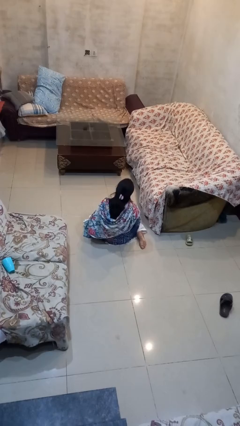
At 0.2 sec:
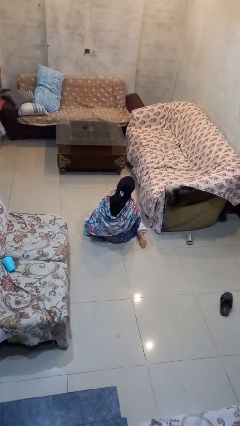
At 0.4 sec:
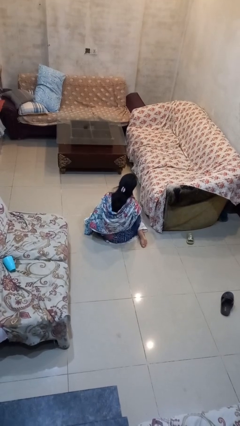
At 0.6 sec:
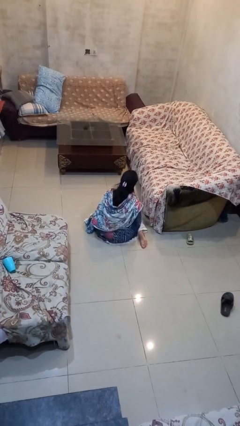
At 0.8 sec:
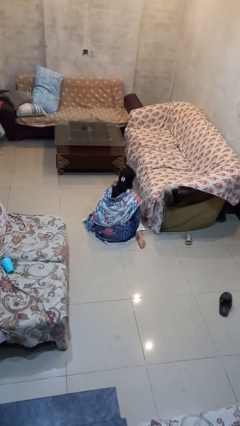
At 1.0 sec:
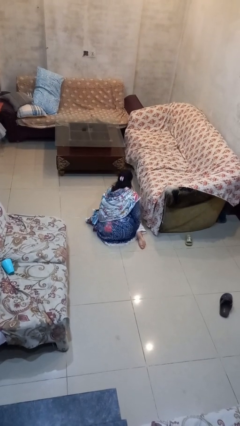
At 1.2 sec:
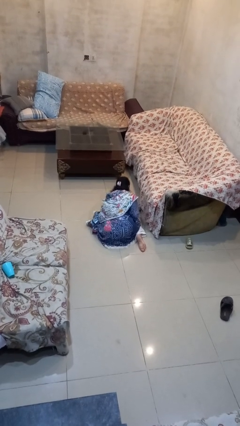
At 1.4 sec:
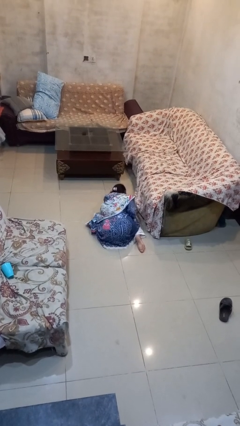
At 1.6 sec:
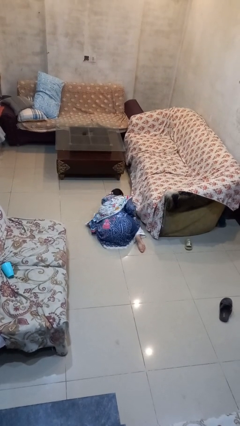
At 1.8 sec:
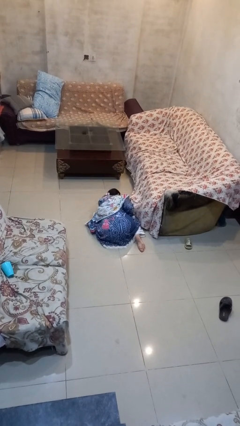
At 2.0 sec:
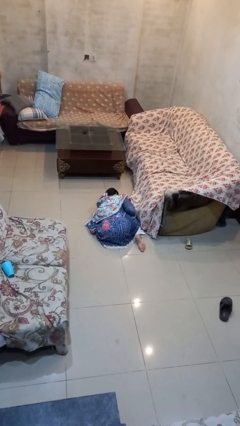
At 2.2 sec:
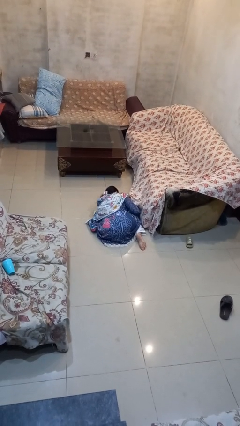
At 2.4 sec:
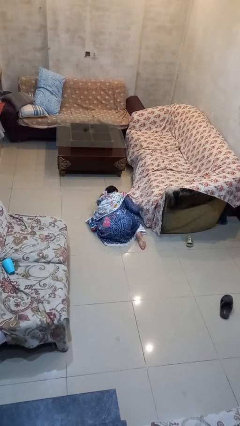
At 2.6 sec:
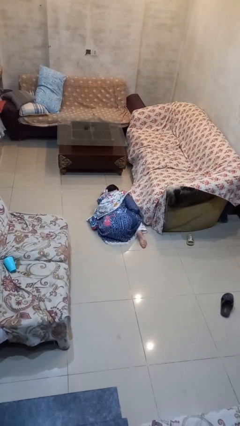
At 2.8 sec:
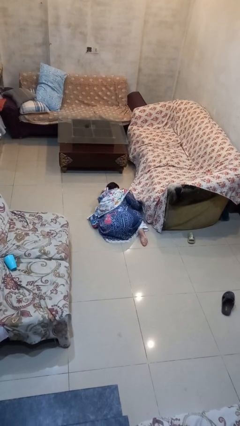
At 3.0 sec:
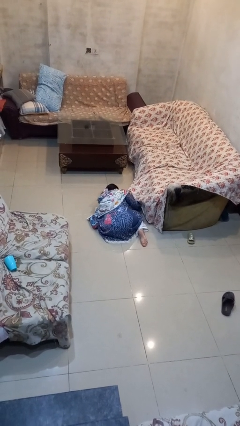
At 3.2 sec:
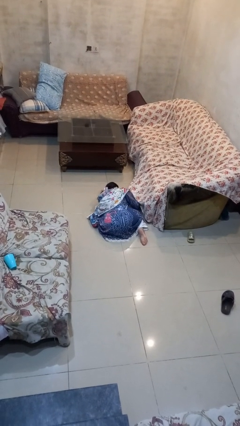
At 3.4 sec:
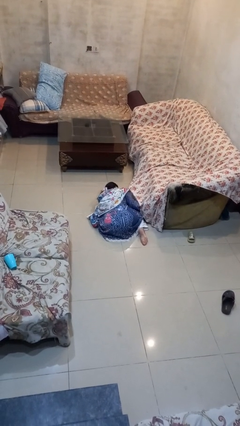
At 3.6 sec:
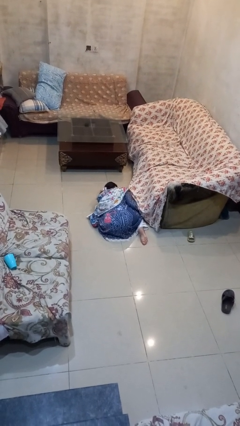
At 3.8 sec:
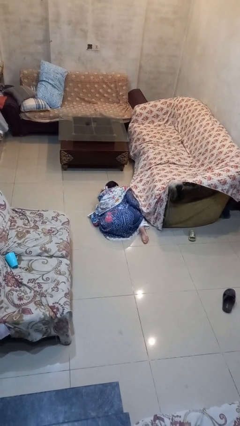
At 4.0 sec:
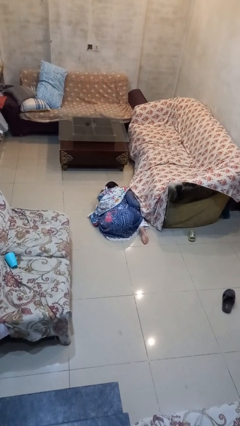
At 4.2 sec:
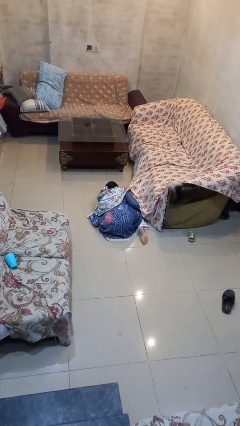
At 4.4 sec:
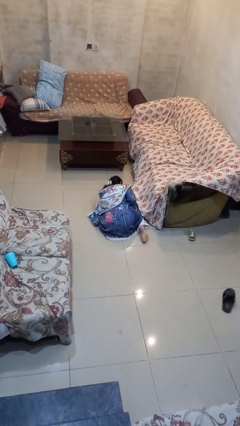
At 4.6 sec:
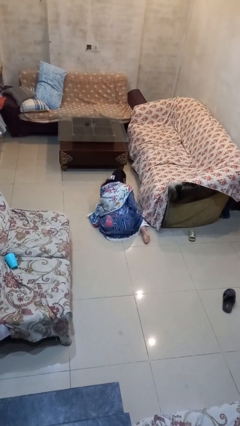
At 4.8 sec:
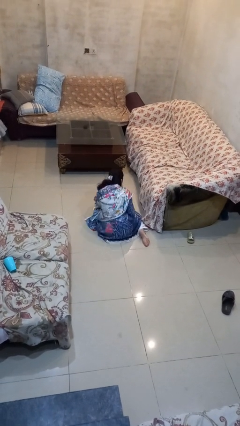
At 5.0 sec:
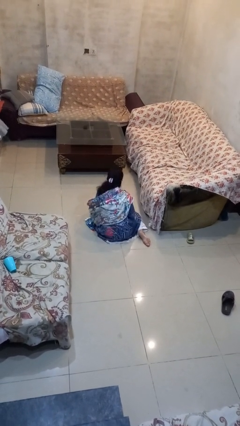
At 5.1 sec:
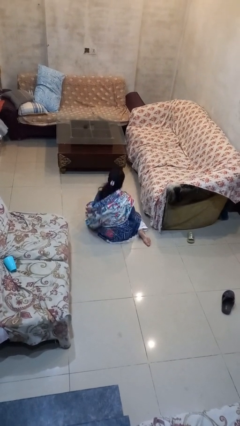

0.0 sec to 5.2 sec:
person searches under couch

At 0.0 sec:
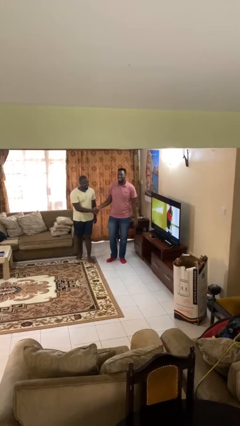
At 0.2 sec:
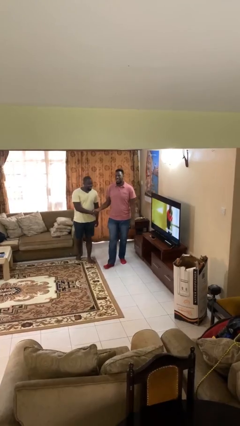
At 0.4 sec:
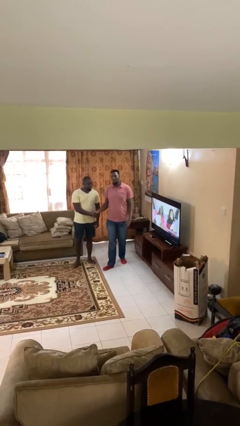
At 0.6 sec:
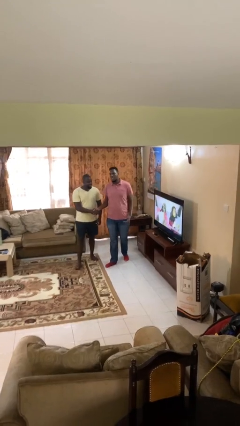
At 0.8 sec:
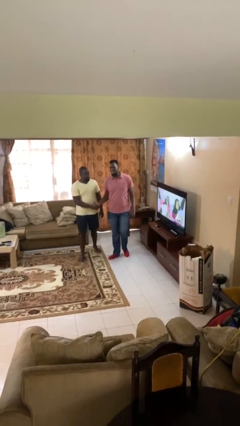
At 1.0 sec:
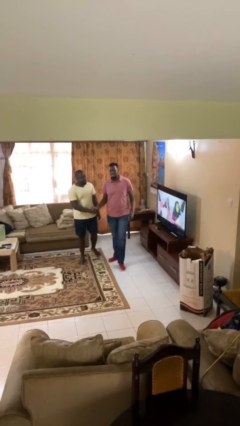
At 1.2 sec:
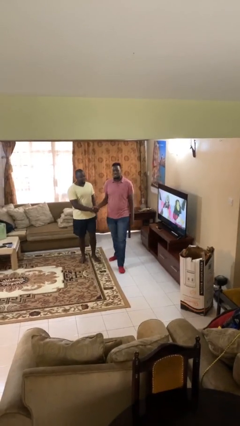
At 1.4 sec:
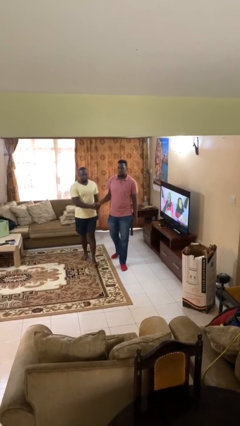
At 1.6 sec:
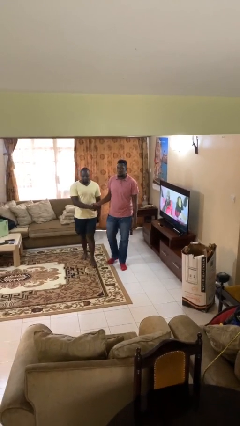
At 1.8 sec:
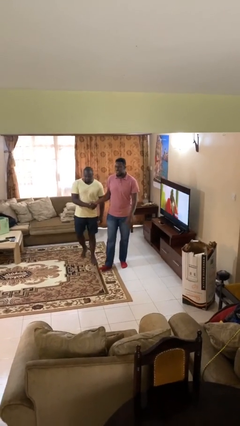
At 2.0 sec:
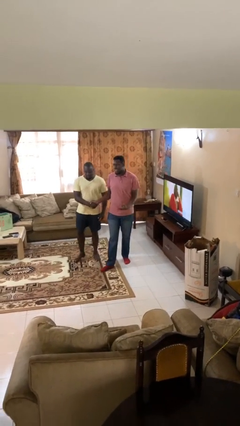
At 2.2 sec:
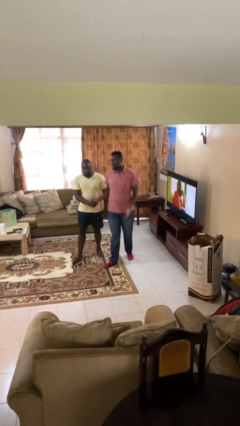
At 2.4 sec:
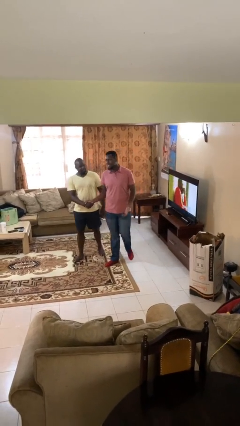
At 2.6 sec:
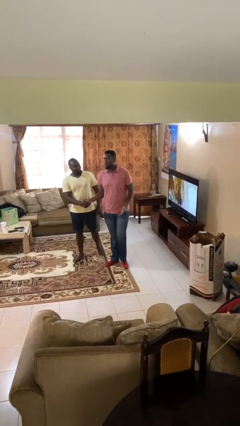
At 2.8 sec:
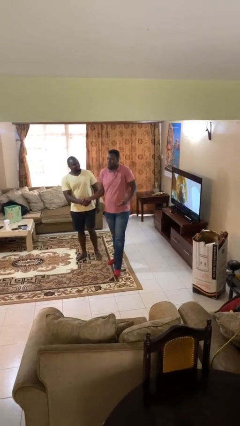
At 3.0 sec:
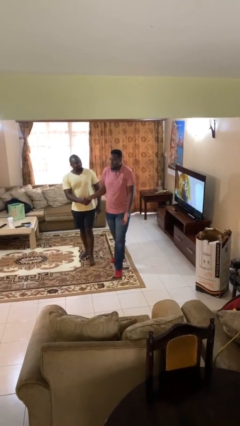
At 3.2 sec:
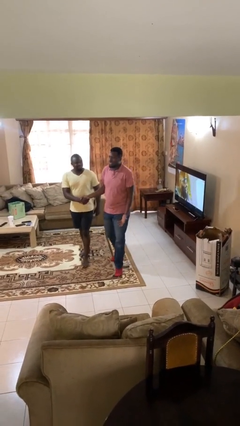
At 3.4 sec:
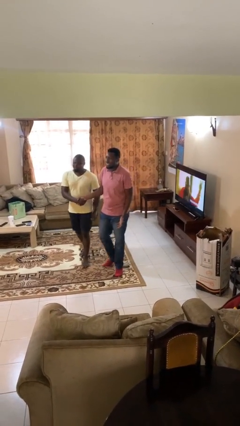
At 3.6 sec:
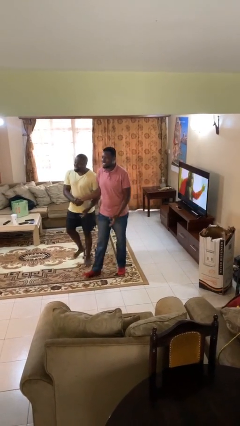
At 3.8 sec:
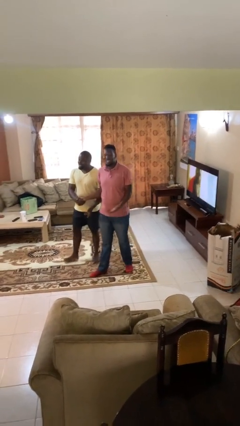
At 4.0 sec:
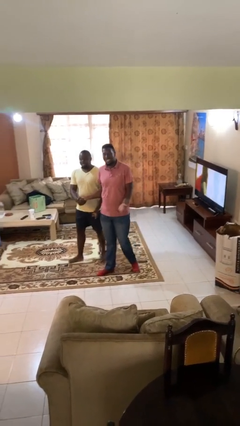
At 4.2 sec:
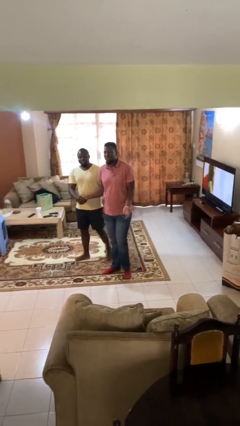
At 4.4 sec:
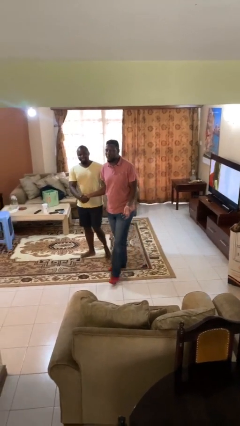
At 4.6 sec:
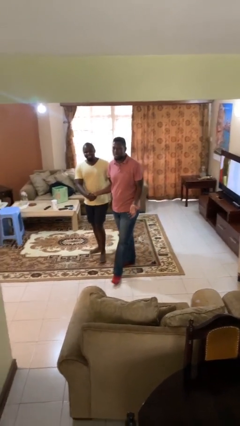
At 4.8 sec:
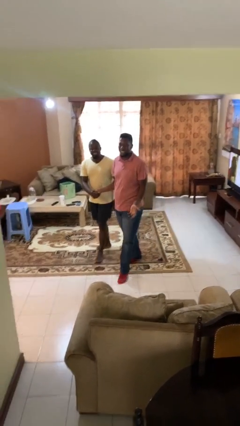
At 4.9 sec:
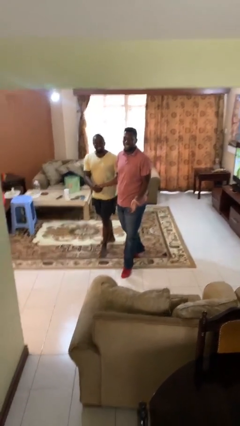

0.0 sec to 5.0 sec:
person holds hand

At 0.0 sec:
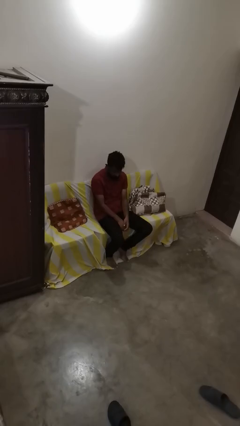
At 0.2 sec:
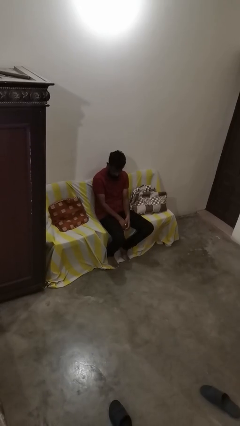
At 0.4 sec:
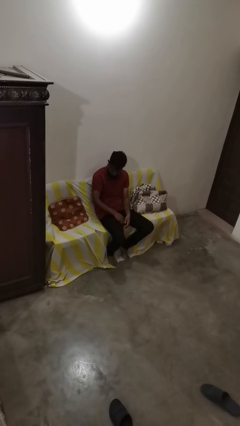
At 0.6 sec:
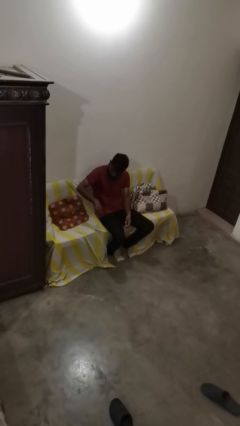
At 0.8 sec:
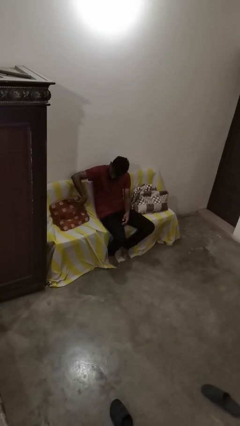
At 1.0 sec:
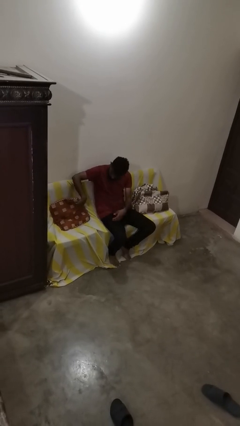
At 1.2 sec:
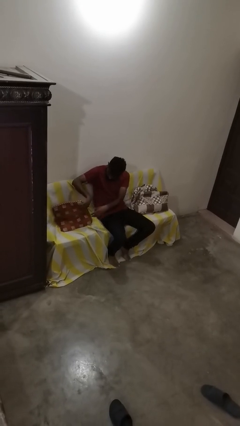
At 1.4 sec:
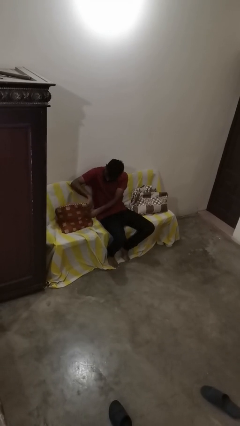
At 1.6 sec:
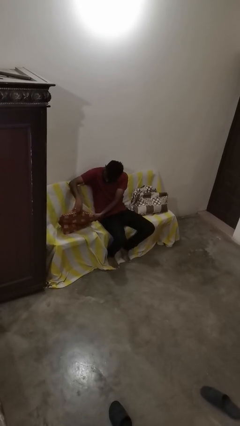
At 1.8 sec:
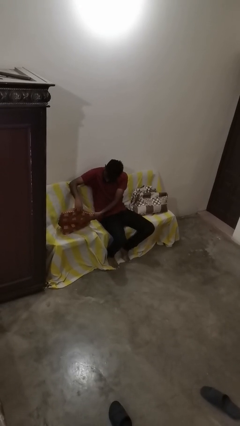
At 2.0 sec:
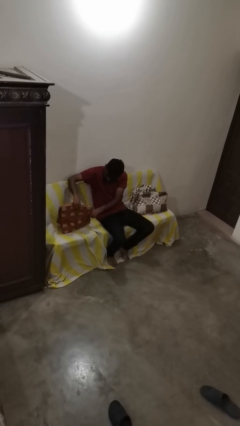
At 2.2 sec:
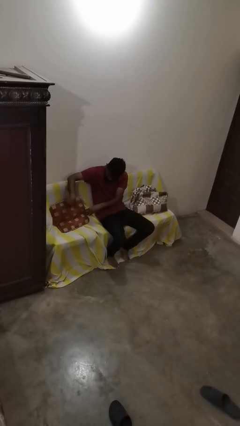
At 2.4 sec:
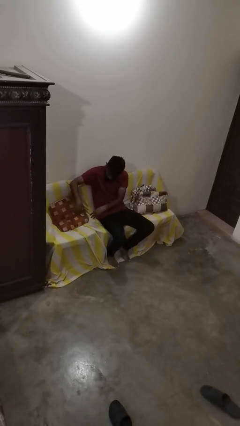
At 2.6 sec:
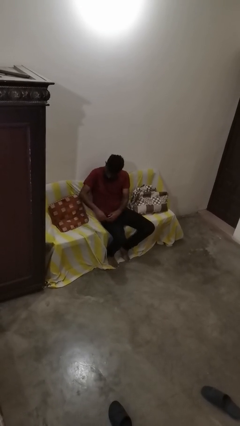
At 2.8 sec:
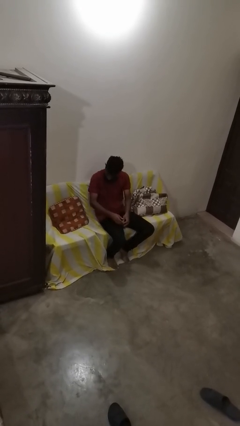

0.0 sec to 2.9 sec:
person searches in couch

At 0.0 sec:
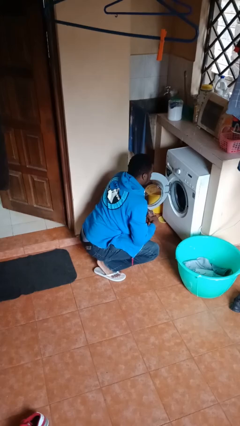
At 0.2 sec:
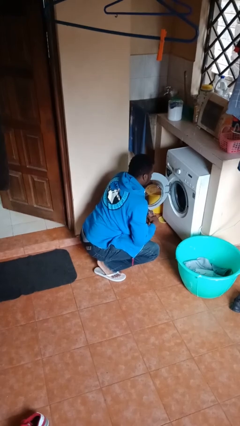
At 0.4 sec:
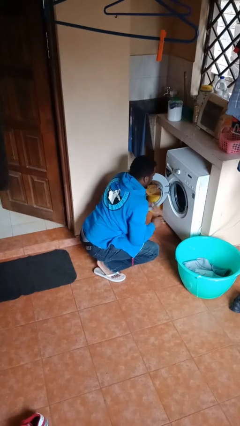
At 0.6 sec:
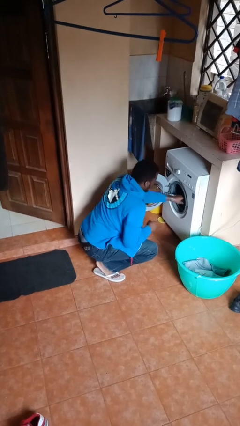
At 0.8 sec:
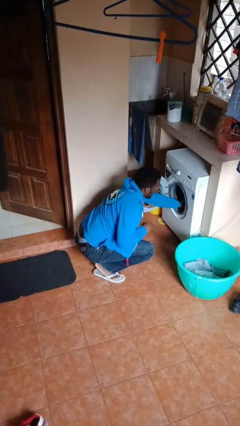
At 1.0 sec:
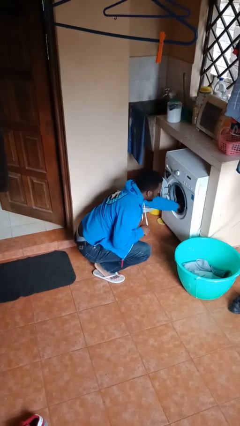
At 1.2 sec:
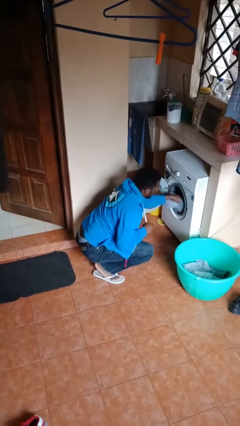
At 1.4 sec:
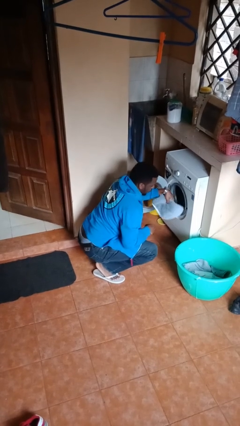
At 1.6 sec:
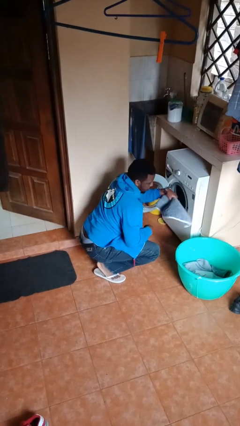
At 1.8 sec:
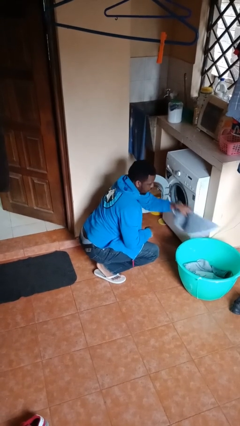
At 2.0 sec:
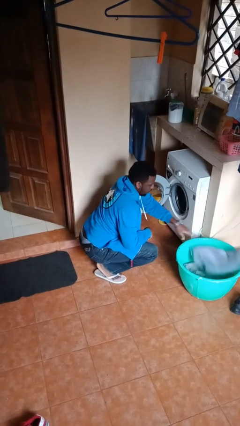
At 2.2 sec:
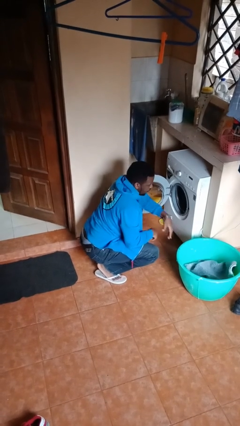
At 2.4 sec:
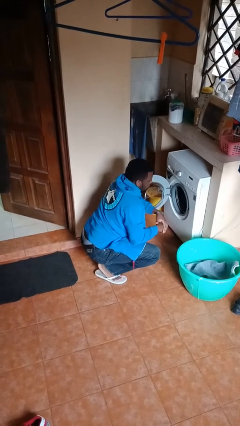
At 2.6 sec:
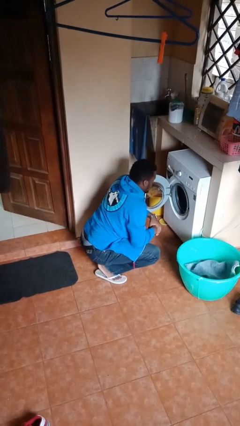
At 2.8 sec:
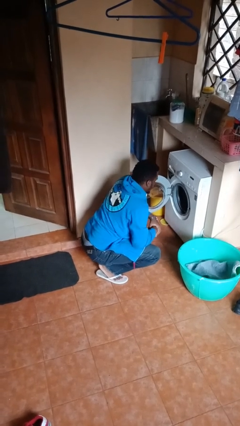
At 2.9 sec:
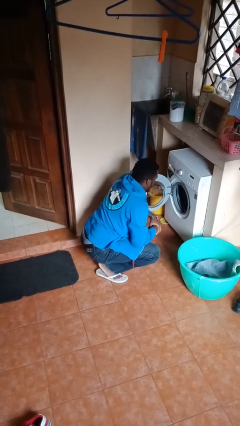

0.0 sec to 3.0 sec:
person loads clotheswasher

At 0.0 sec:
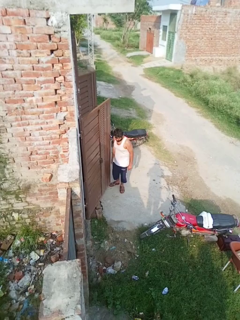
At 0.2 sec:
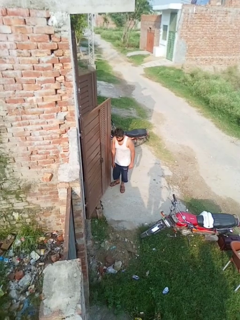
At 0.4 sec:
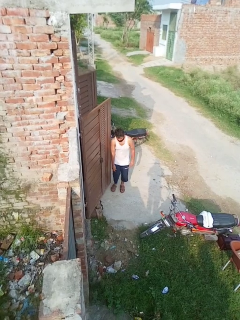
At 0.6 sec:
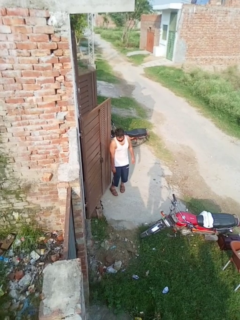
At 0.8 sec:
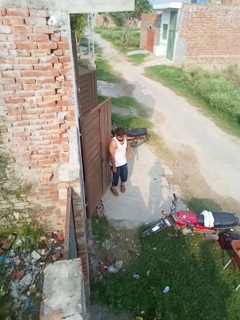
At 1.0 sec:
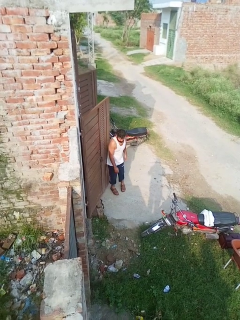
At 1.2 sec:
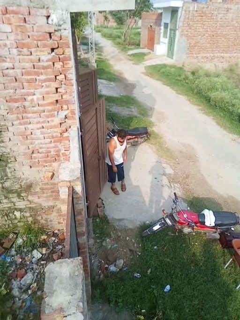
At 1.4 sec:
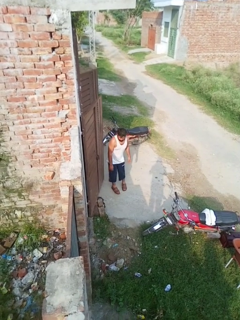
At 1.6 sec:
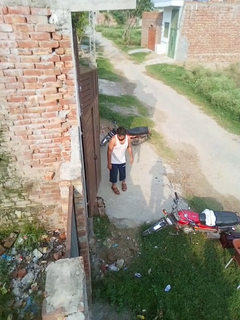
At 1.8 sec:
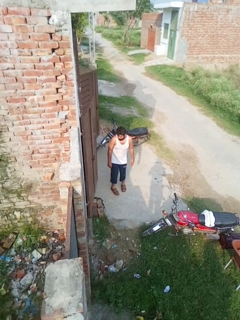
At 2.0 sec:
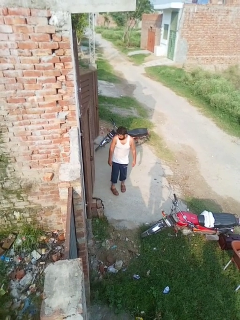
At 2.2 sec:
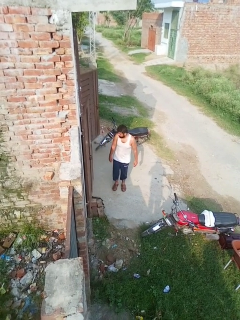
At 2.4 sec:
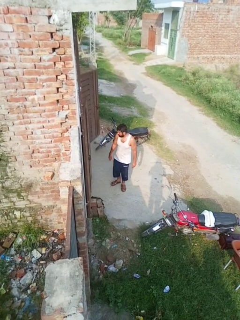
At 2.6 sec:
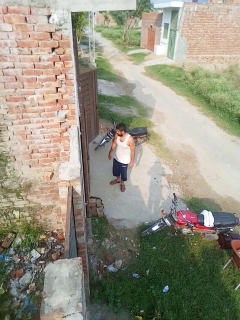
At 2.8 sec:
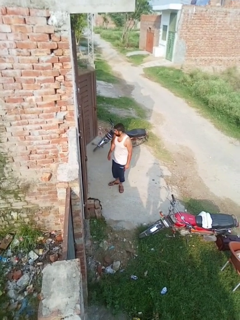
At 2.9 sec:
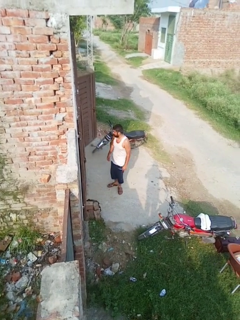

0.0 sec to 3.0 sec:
person closes door with hip
